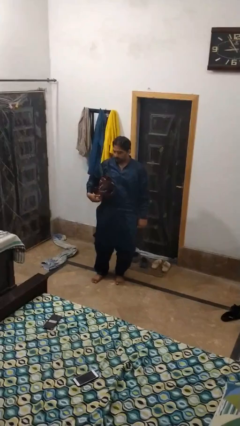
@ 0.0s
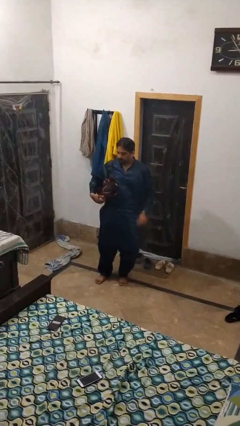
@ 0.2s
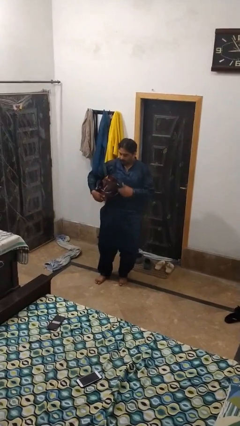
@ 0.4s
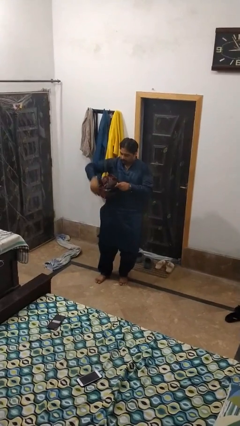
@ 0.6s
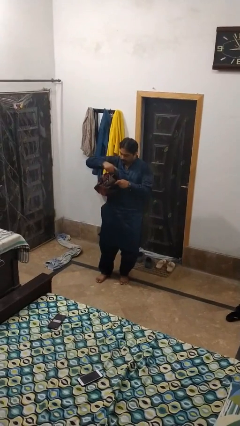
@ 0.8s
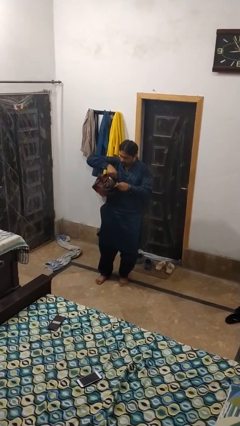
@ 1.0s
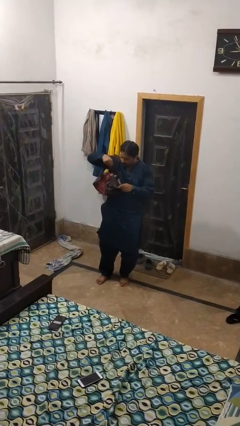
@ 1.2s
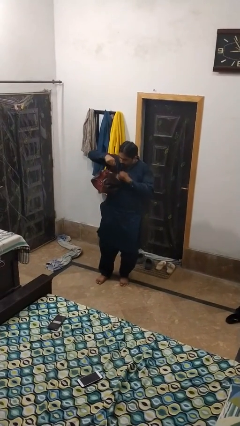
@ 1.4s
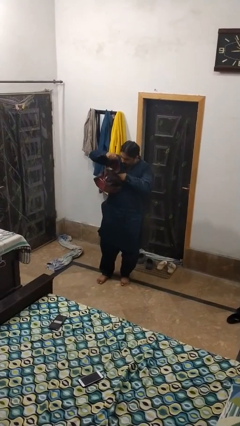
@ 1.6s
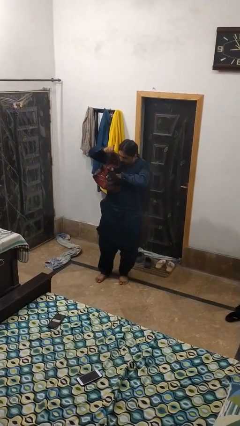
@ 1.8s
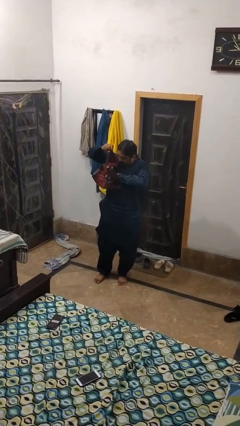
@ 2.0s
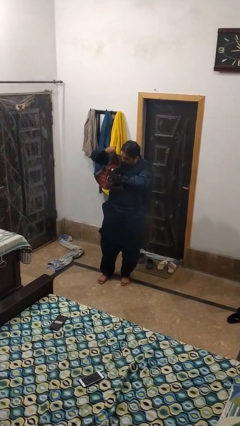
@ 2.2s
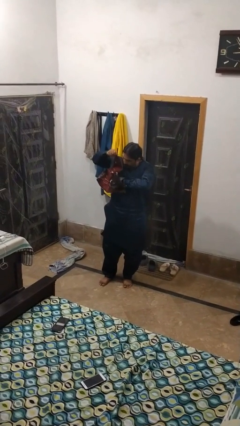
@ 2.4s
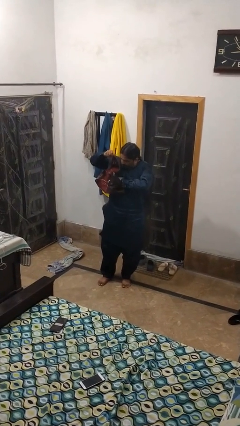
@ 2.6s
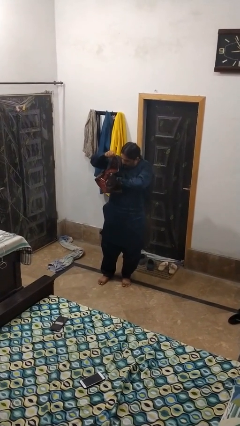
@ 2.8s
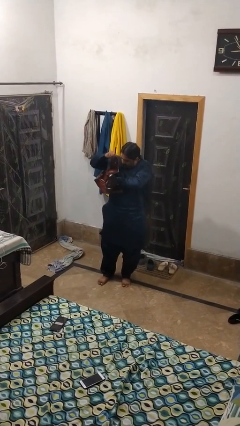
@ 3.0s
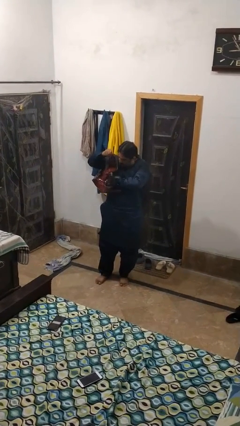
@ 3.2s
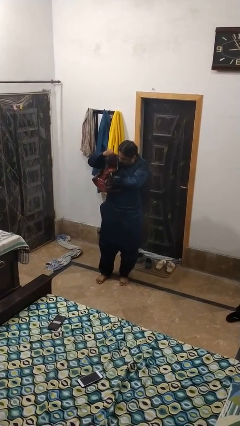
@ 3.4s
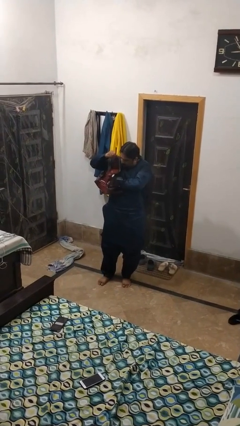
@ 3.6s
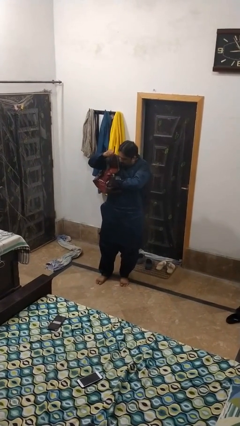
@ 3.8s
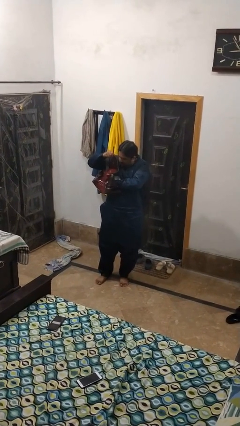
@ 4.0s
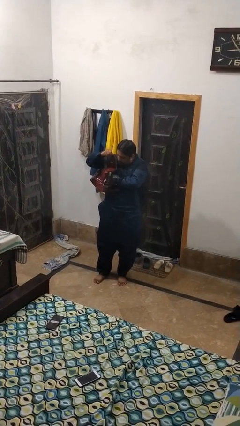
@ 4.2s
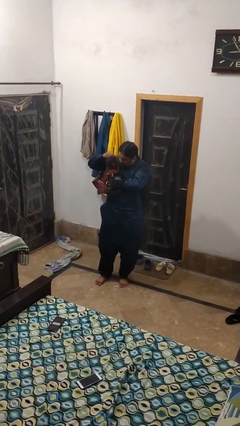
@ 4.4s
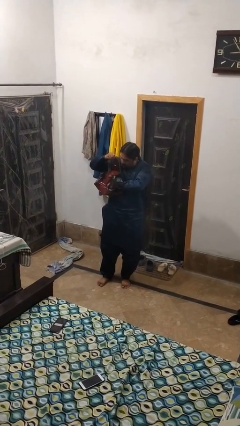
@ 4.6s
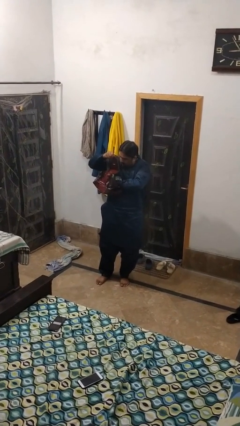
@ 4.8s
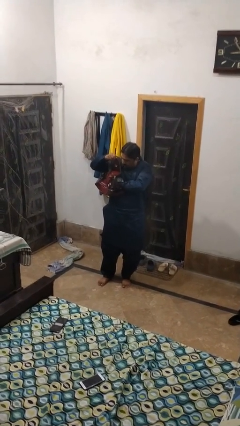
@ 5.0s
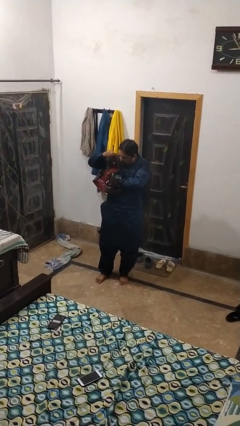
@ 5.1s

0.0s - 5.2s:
person searches in purse

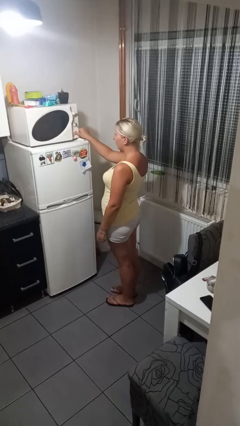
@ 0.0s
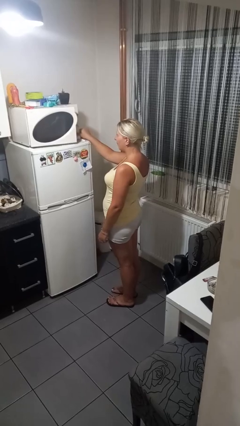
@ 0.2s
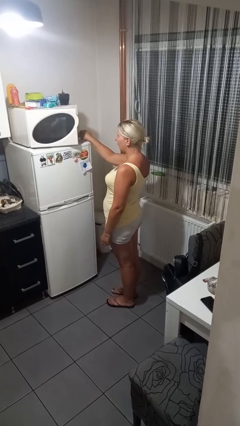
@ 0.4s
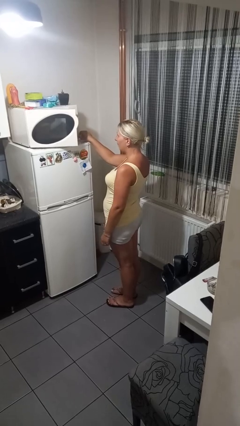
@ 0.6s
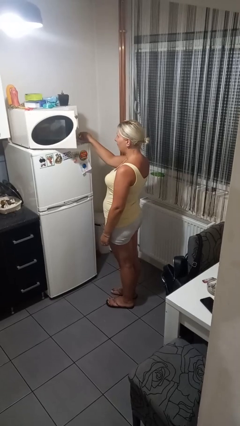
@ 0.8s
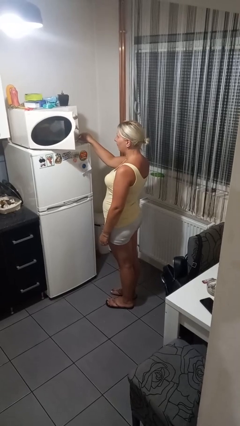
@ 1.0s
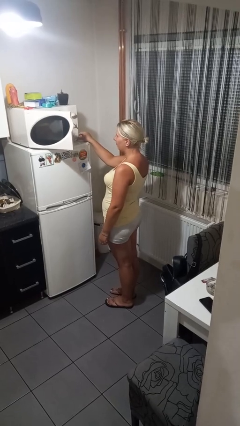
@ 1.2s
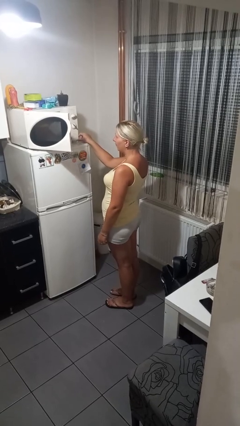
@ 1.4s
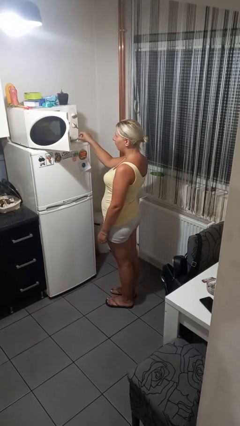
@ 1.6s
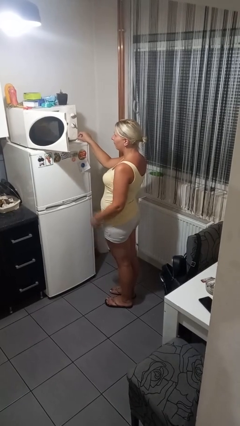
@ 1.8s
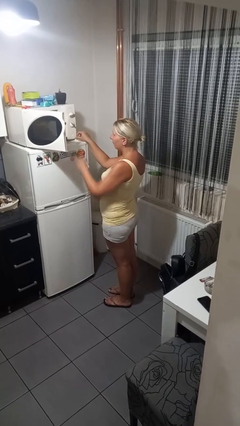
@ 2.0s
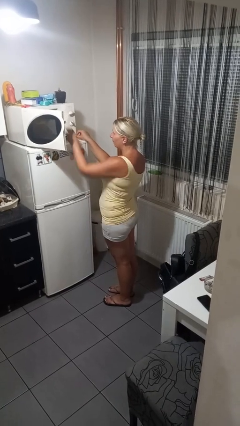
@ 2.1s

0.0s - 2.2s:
person opens microwave

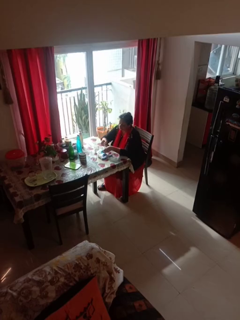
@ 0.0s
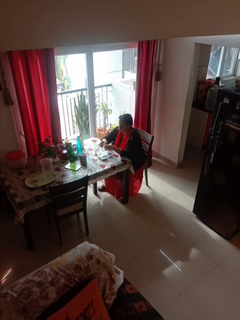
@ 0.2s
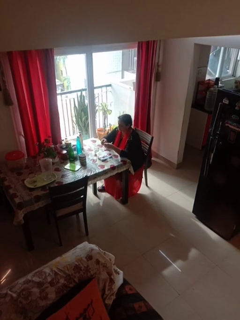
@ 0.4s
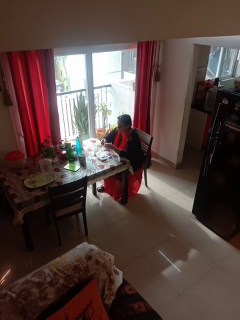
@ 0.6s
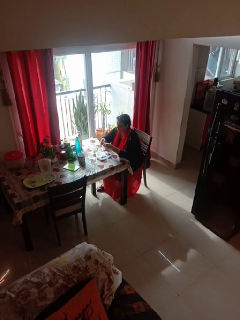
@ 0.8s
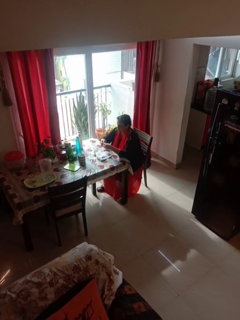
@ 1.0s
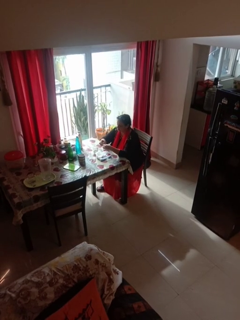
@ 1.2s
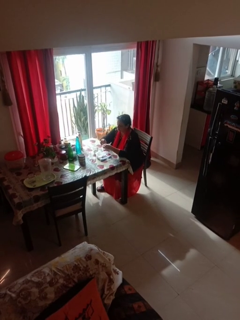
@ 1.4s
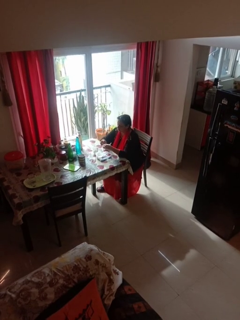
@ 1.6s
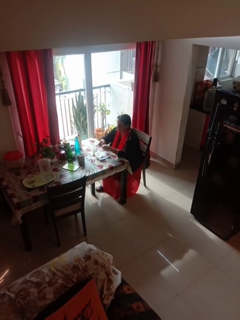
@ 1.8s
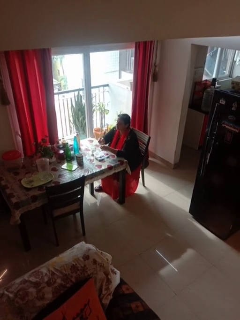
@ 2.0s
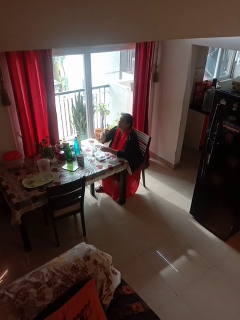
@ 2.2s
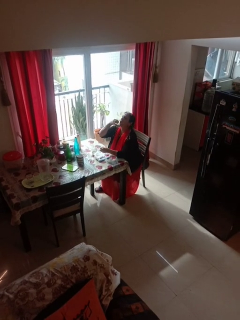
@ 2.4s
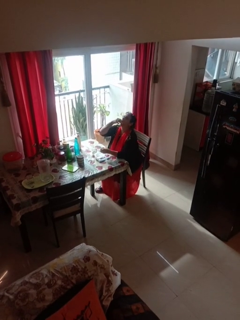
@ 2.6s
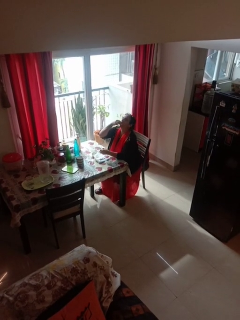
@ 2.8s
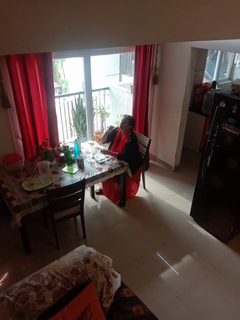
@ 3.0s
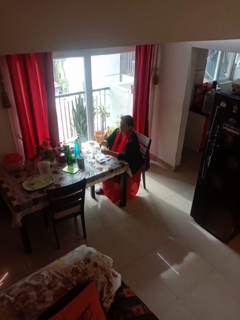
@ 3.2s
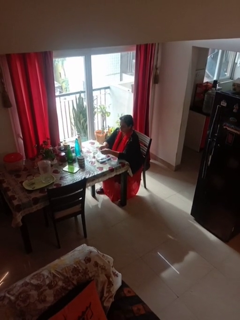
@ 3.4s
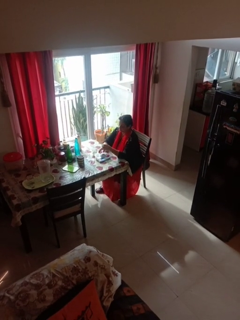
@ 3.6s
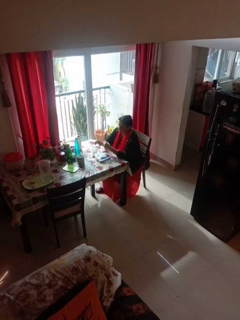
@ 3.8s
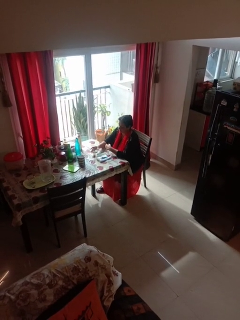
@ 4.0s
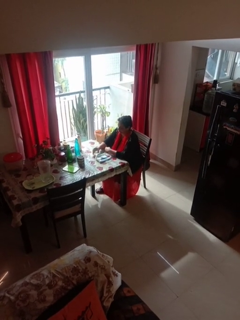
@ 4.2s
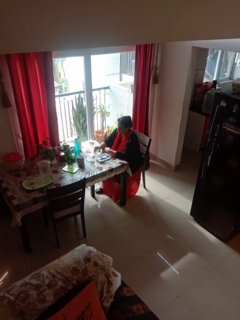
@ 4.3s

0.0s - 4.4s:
person takes medicine pills

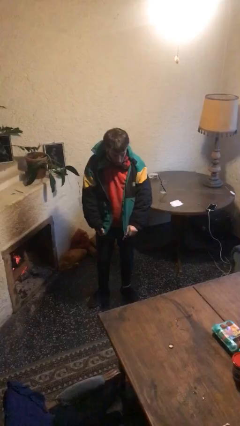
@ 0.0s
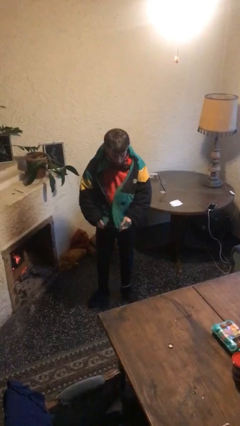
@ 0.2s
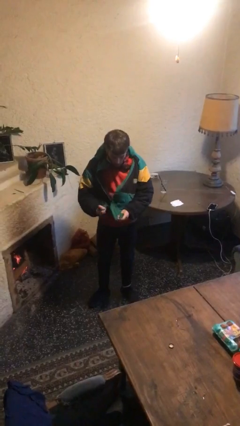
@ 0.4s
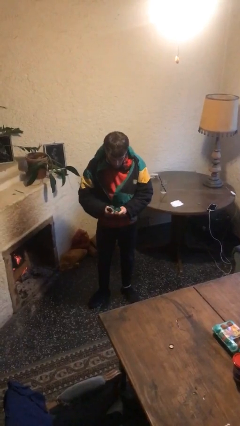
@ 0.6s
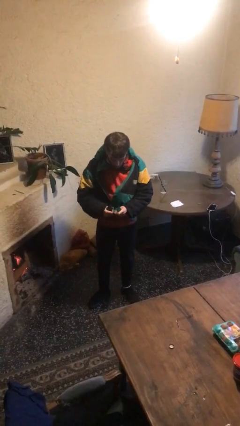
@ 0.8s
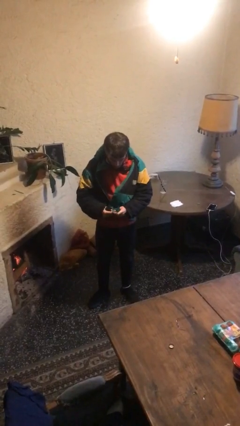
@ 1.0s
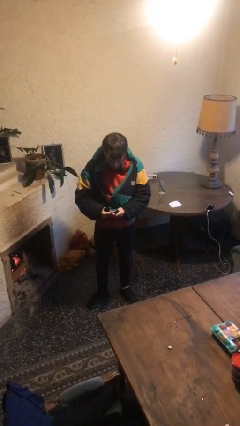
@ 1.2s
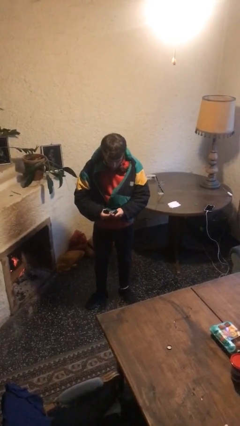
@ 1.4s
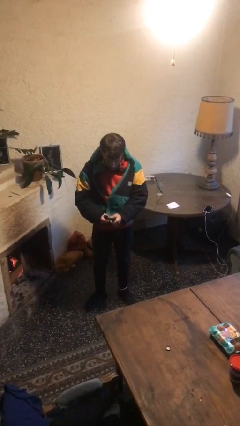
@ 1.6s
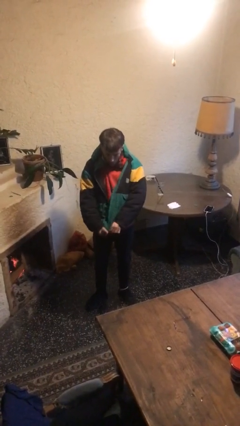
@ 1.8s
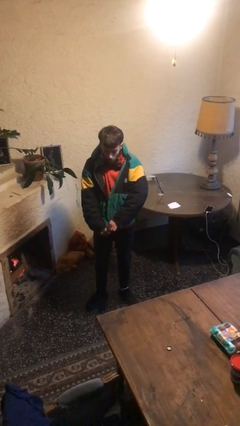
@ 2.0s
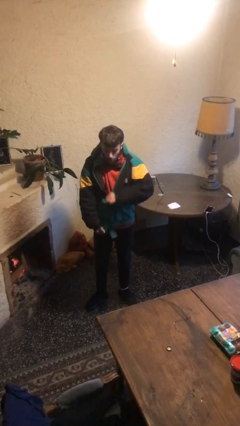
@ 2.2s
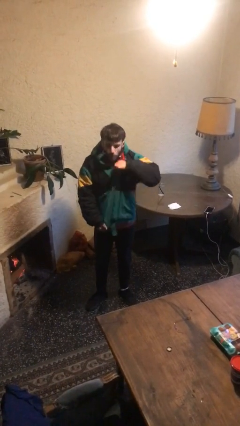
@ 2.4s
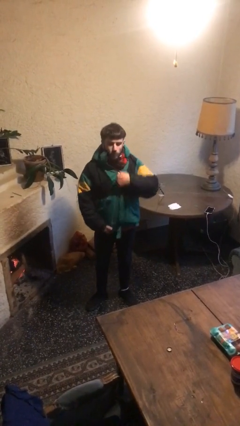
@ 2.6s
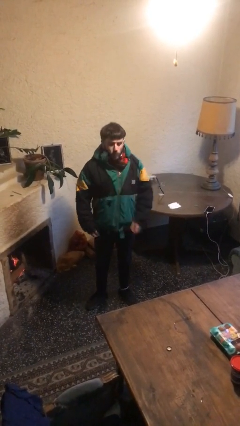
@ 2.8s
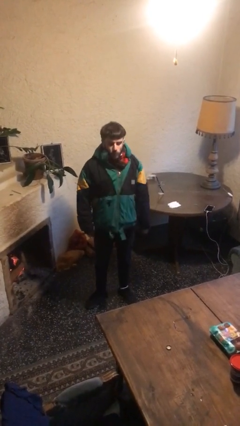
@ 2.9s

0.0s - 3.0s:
person zips up jacket

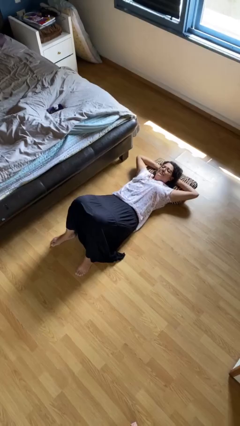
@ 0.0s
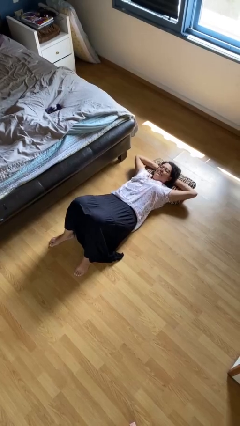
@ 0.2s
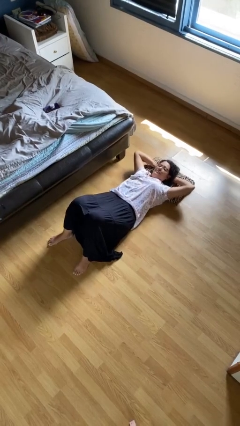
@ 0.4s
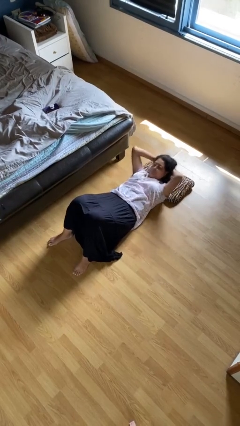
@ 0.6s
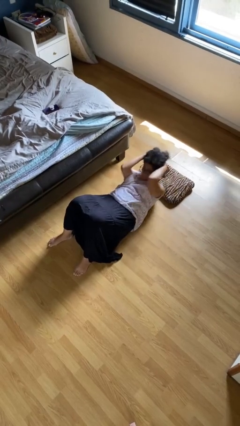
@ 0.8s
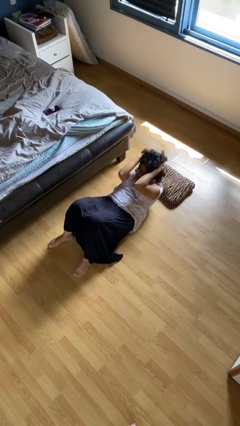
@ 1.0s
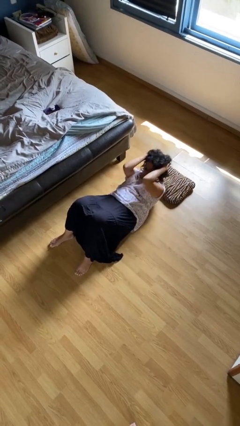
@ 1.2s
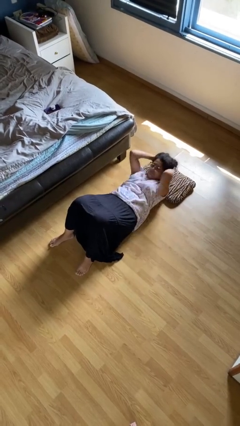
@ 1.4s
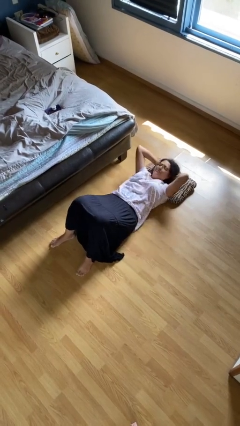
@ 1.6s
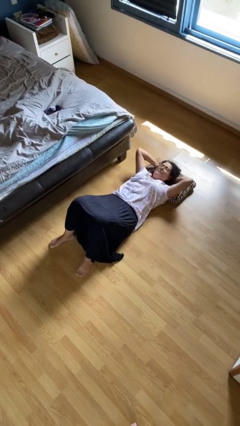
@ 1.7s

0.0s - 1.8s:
person exercises with situp

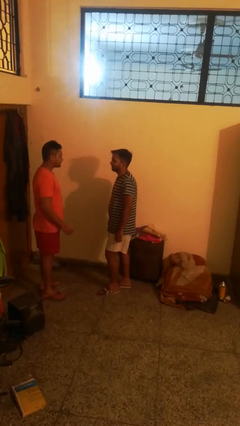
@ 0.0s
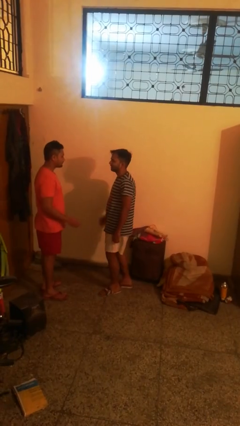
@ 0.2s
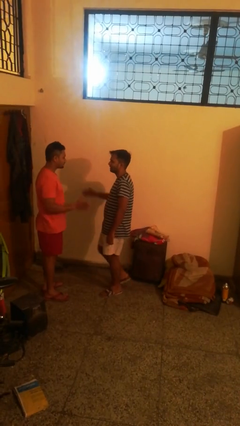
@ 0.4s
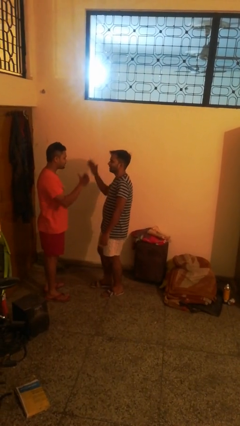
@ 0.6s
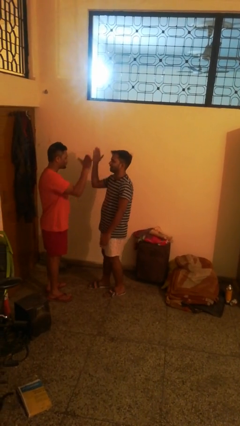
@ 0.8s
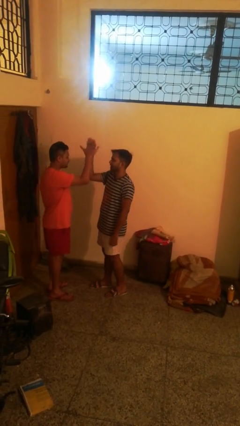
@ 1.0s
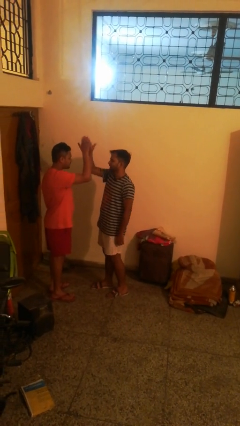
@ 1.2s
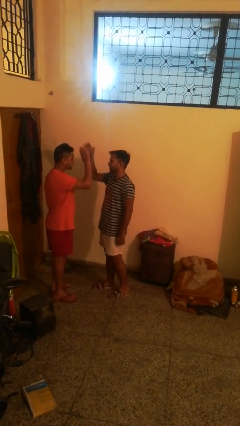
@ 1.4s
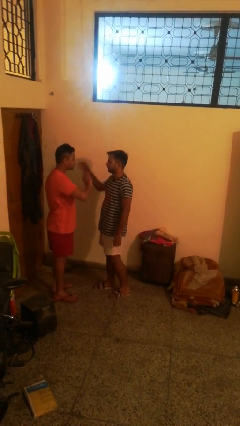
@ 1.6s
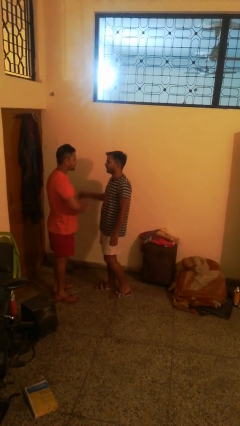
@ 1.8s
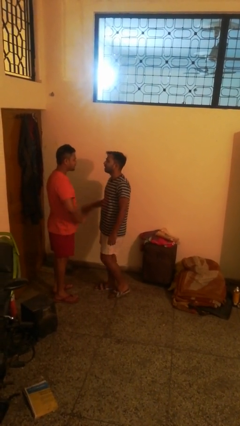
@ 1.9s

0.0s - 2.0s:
person highfives hand
